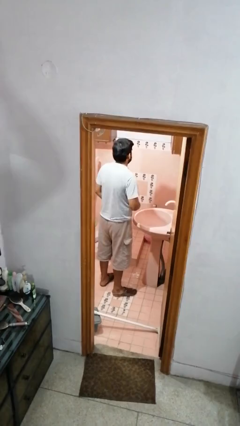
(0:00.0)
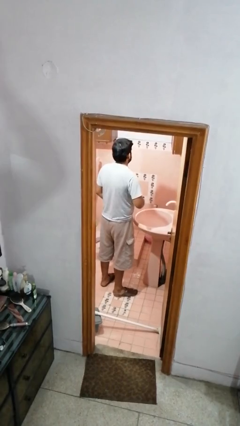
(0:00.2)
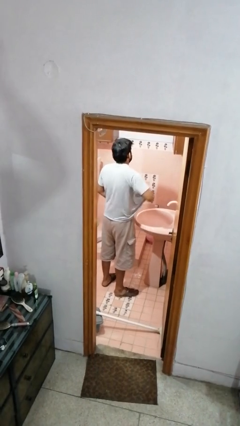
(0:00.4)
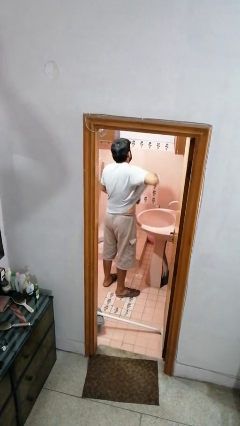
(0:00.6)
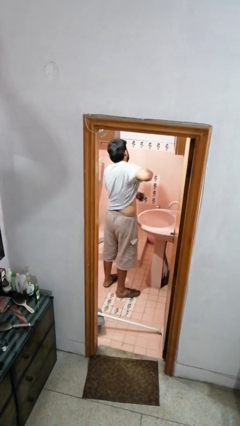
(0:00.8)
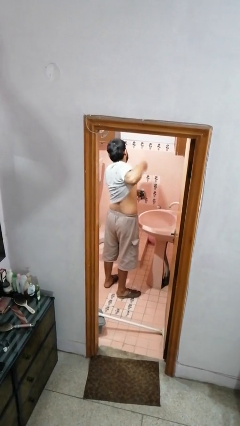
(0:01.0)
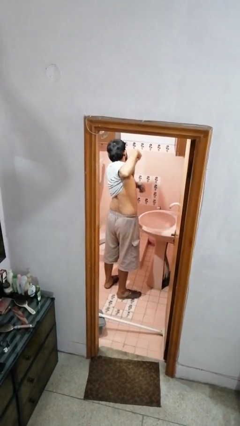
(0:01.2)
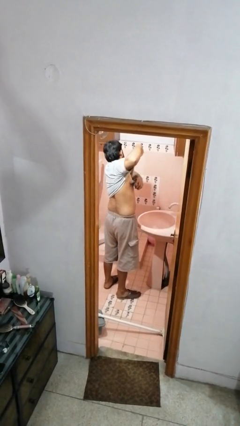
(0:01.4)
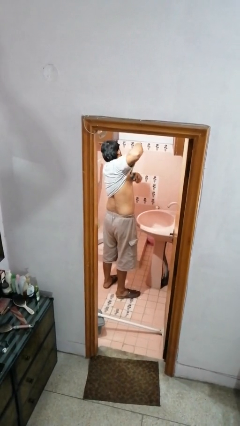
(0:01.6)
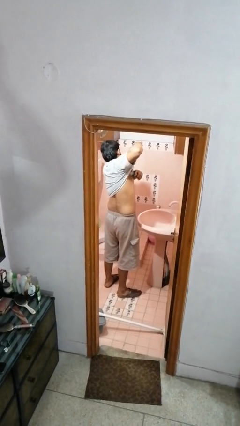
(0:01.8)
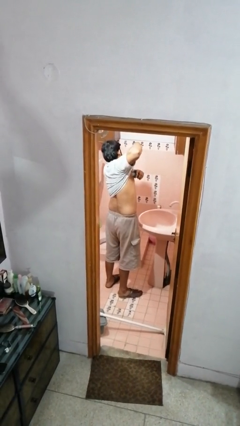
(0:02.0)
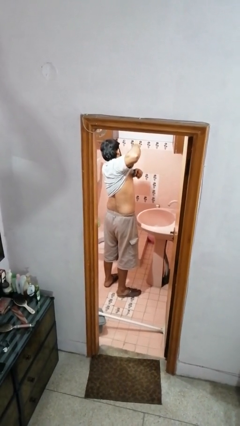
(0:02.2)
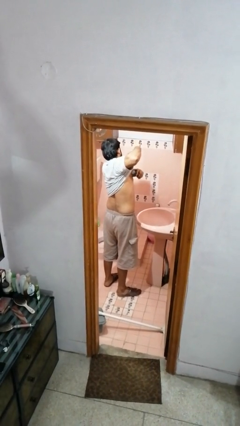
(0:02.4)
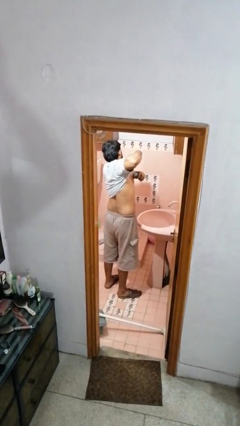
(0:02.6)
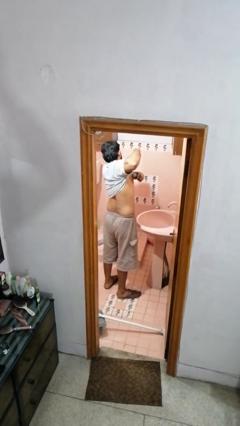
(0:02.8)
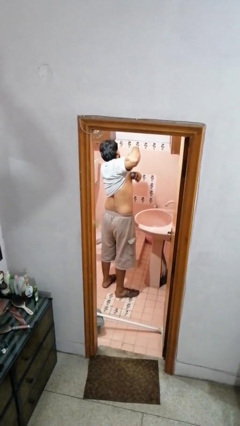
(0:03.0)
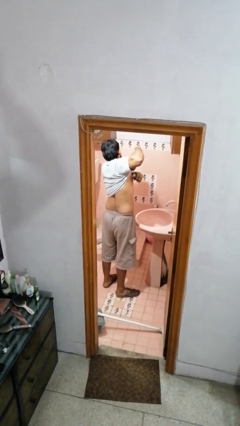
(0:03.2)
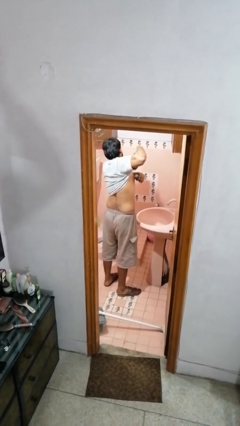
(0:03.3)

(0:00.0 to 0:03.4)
person applies deodorant

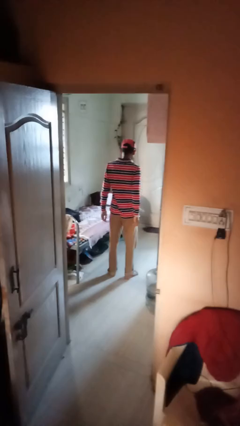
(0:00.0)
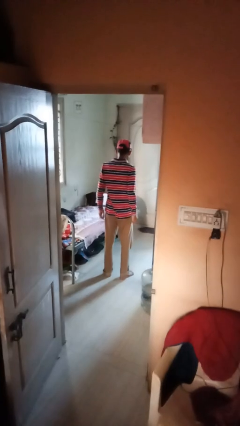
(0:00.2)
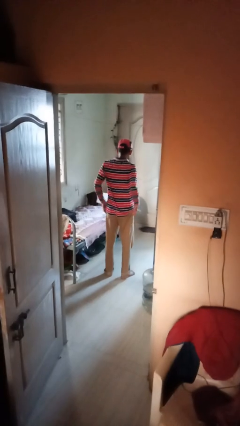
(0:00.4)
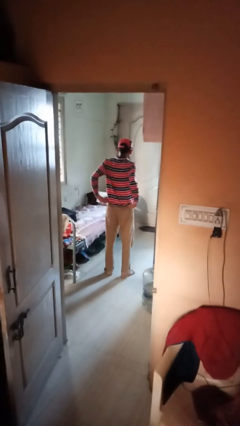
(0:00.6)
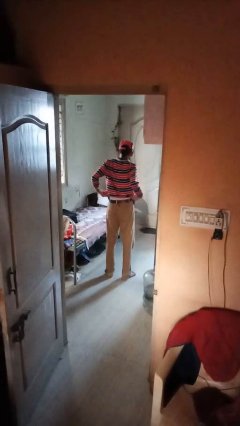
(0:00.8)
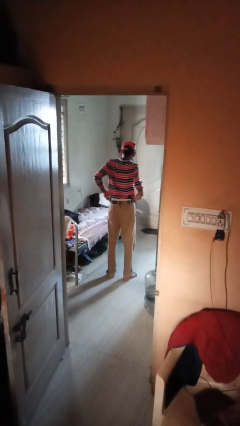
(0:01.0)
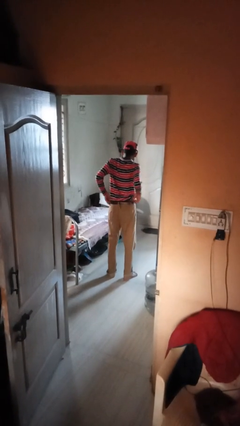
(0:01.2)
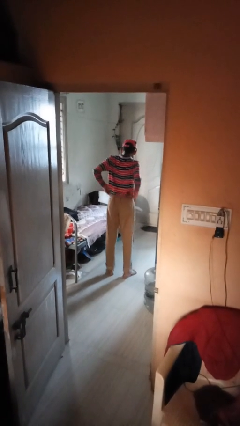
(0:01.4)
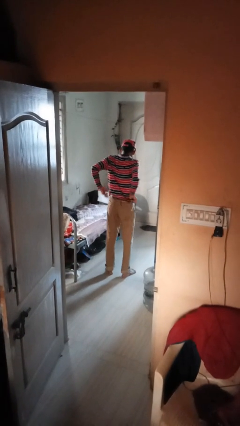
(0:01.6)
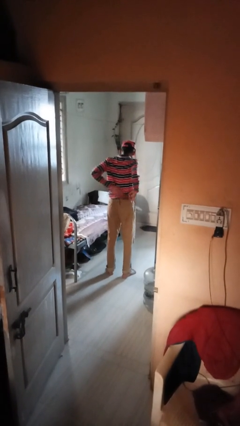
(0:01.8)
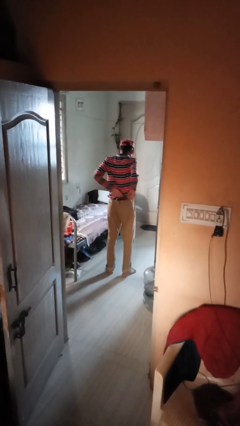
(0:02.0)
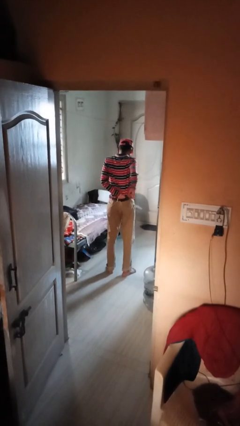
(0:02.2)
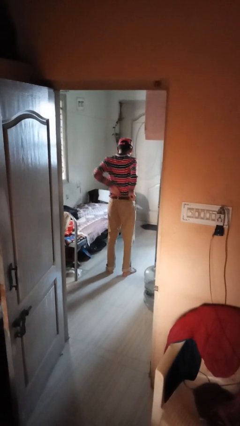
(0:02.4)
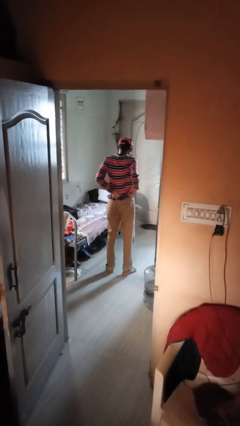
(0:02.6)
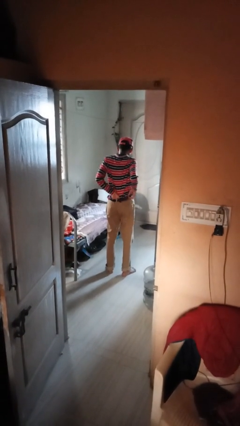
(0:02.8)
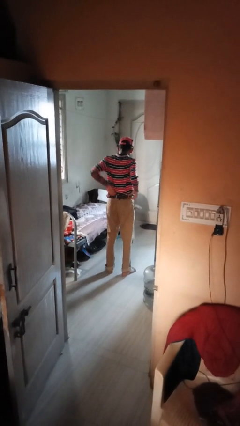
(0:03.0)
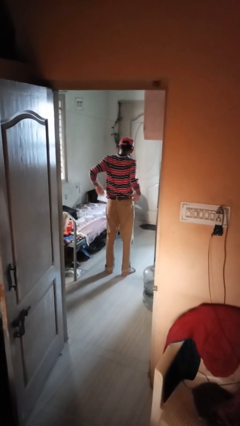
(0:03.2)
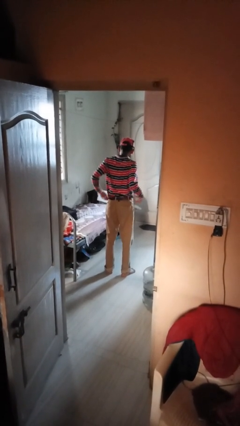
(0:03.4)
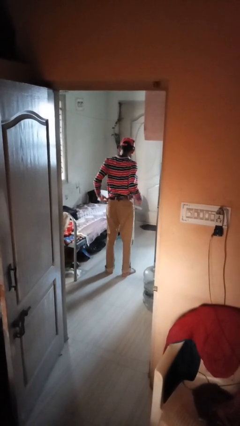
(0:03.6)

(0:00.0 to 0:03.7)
person tucks in shirt

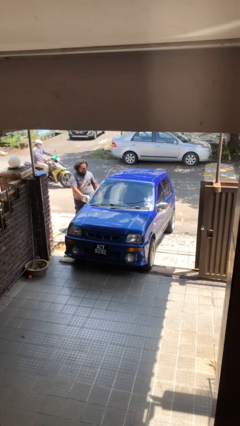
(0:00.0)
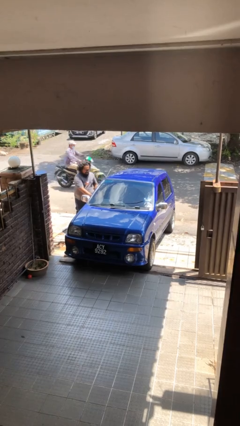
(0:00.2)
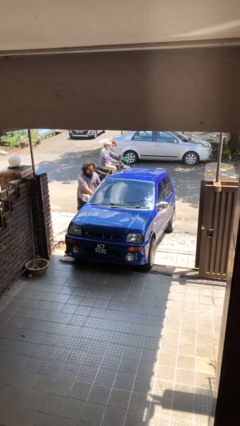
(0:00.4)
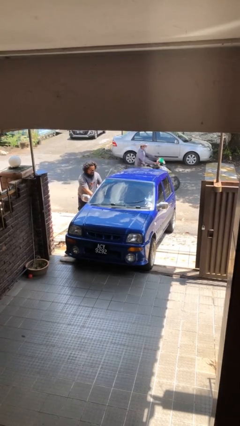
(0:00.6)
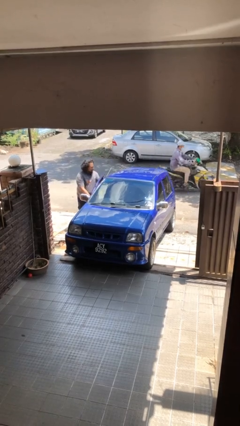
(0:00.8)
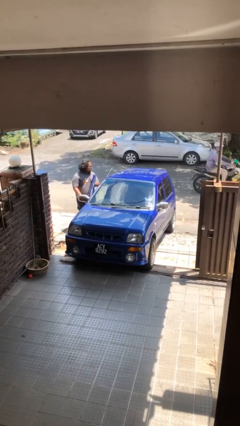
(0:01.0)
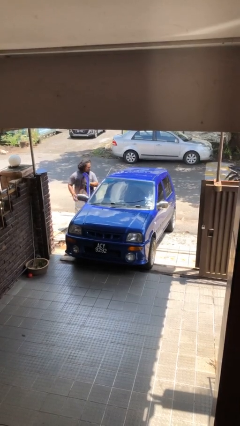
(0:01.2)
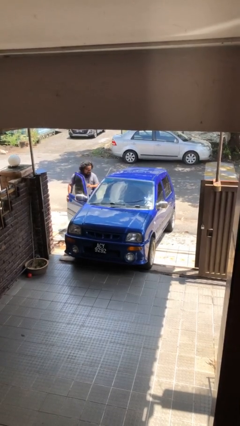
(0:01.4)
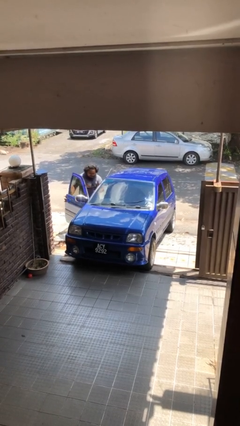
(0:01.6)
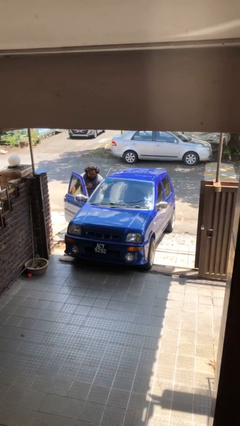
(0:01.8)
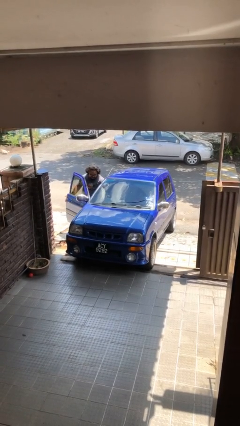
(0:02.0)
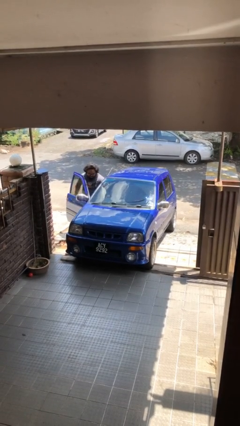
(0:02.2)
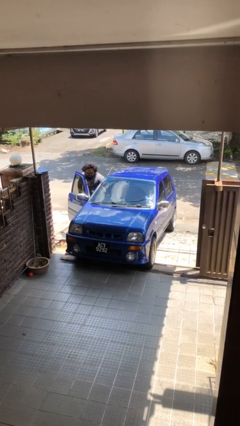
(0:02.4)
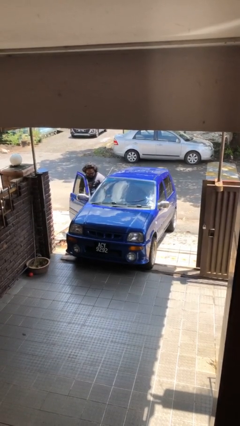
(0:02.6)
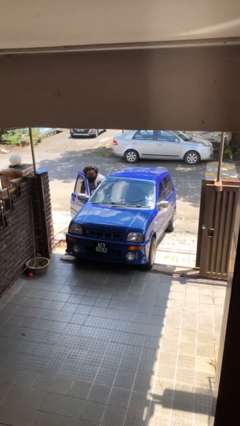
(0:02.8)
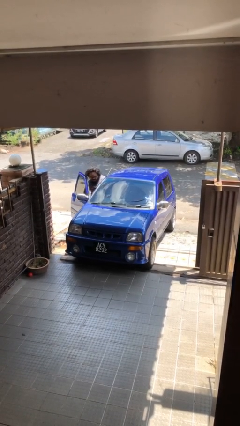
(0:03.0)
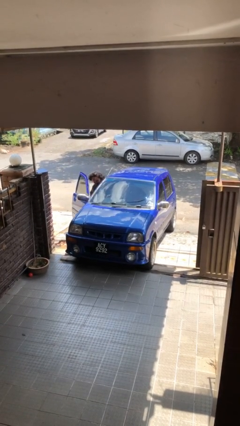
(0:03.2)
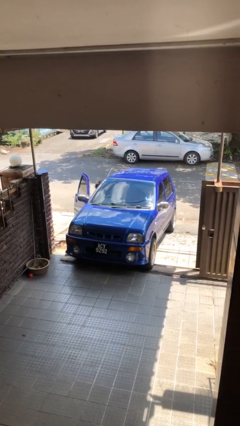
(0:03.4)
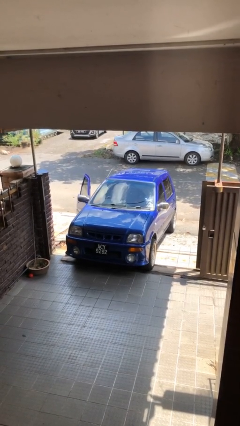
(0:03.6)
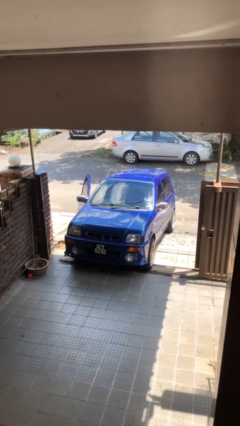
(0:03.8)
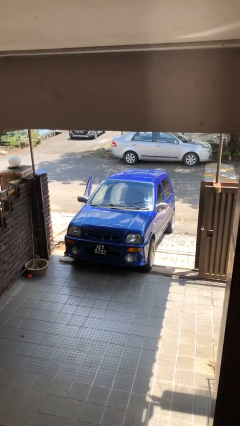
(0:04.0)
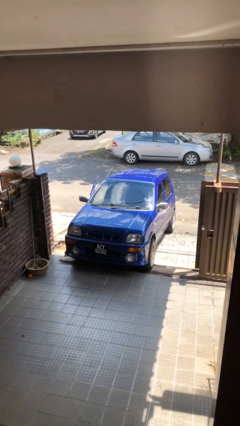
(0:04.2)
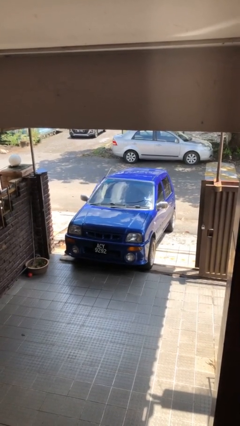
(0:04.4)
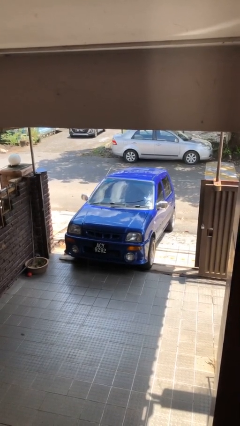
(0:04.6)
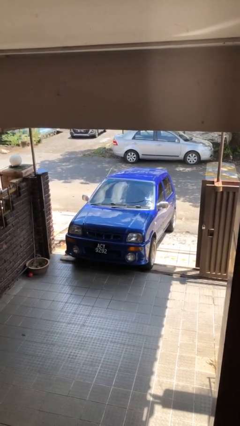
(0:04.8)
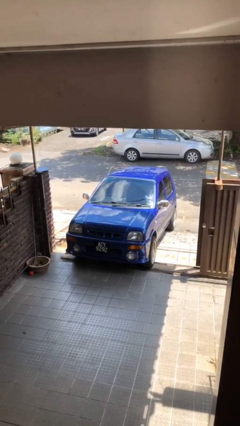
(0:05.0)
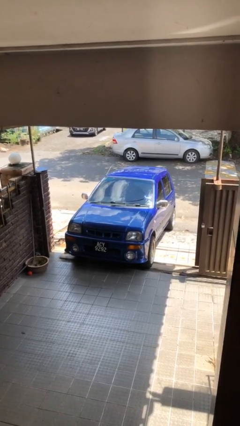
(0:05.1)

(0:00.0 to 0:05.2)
car picks up person

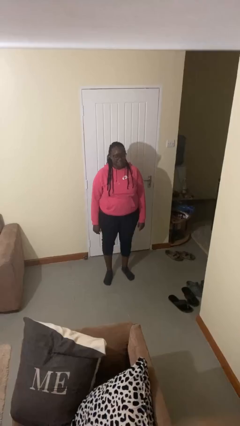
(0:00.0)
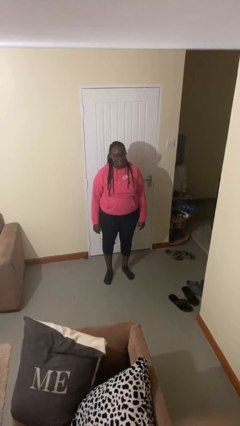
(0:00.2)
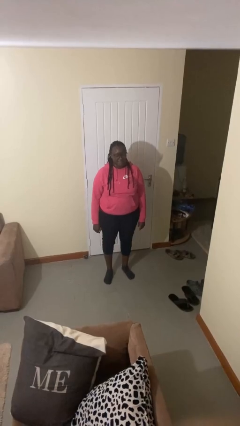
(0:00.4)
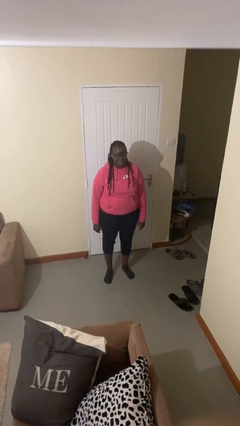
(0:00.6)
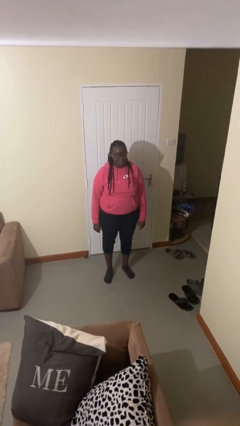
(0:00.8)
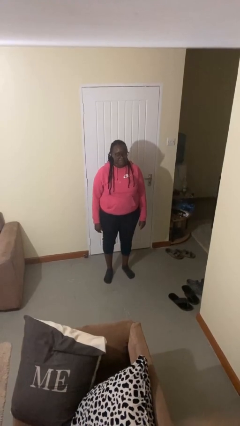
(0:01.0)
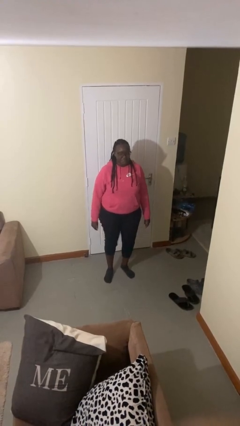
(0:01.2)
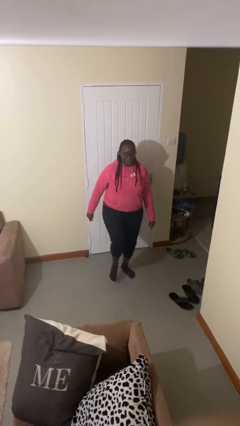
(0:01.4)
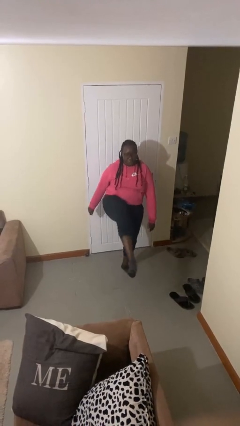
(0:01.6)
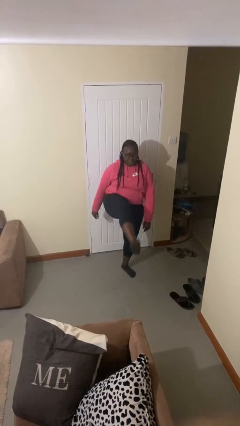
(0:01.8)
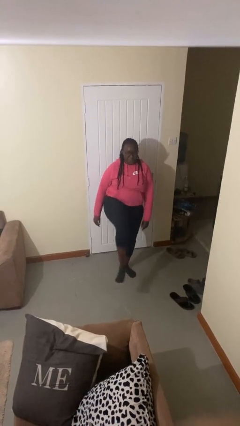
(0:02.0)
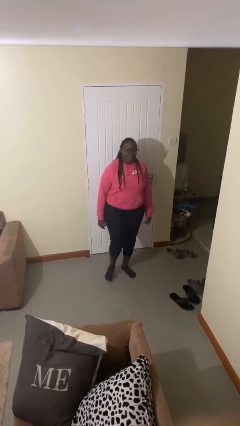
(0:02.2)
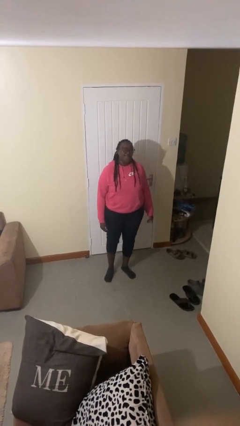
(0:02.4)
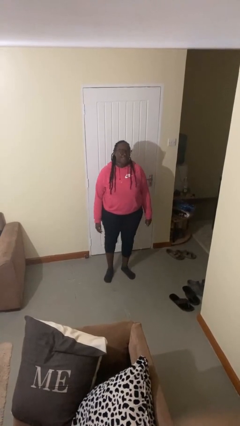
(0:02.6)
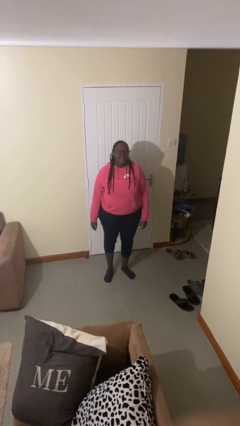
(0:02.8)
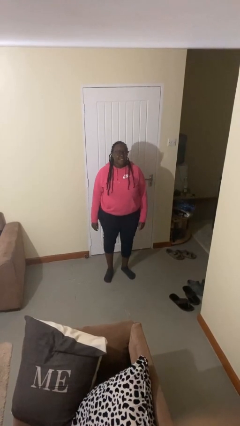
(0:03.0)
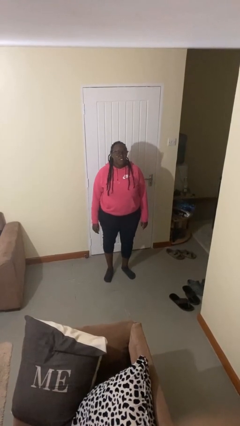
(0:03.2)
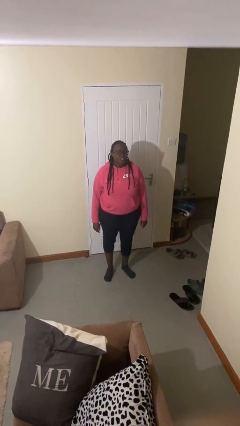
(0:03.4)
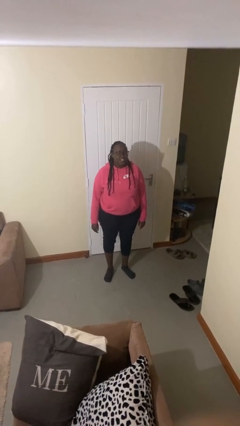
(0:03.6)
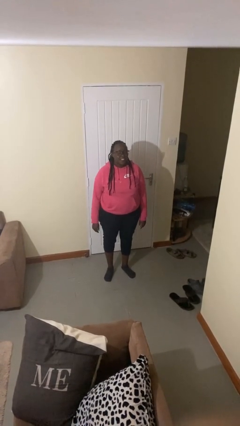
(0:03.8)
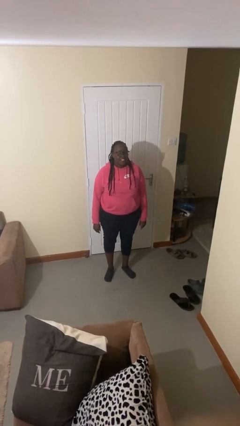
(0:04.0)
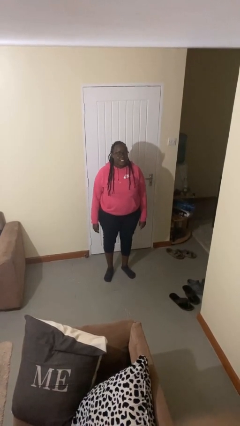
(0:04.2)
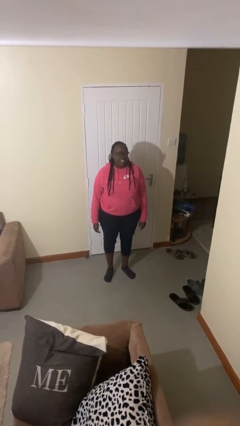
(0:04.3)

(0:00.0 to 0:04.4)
person karate kicks

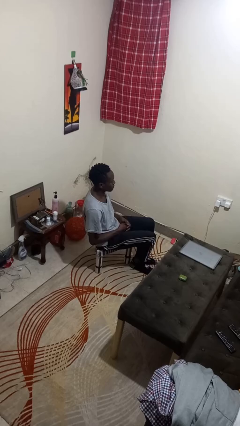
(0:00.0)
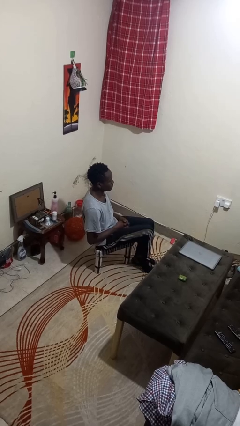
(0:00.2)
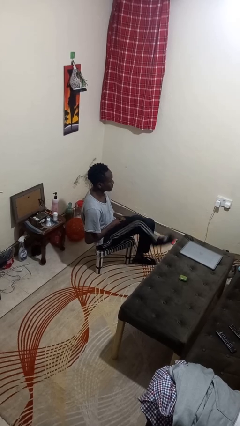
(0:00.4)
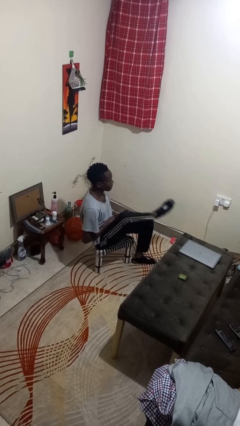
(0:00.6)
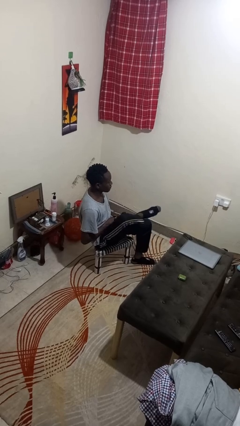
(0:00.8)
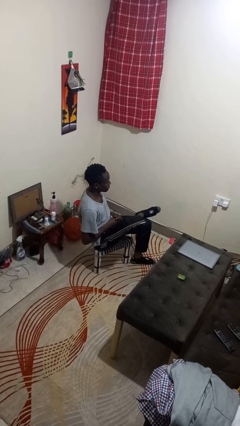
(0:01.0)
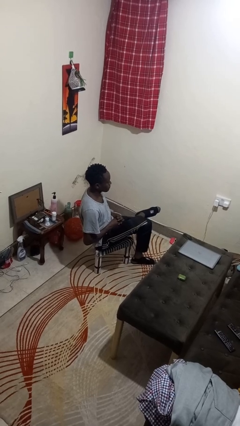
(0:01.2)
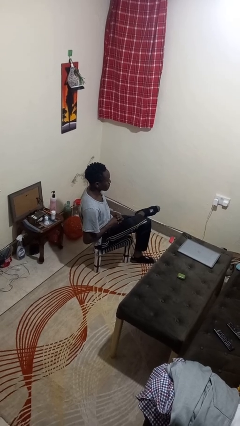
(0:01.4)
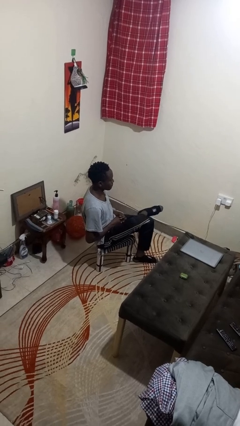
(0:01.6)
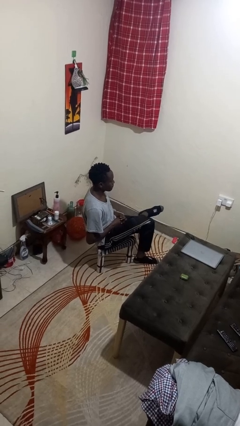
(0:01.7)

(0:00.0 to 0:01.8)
person crosses legs
